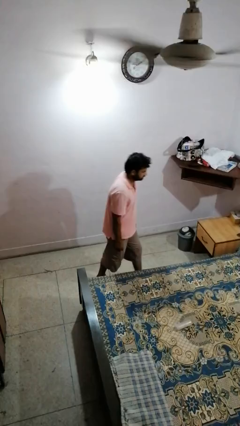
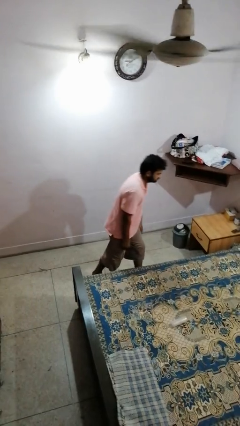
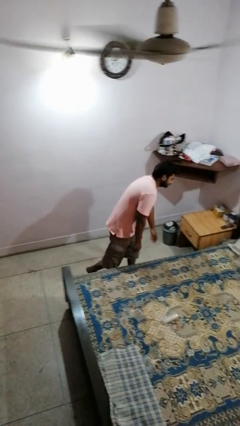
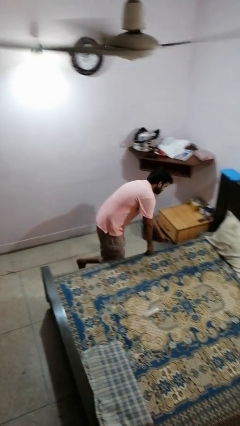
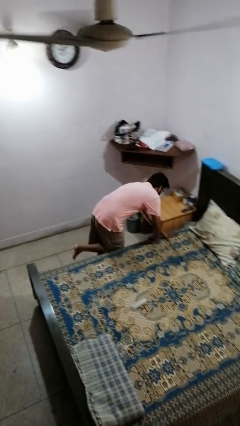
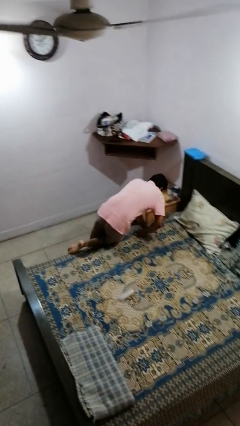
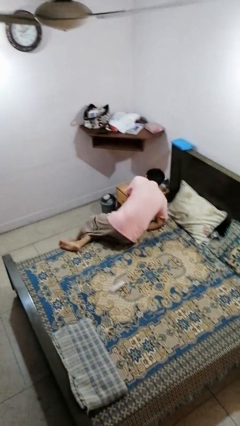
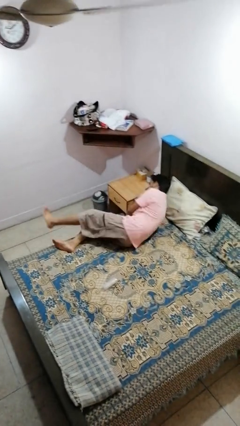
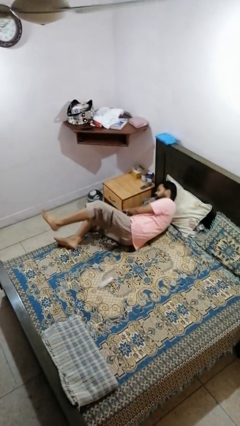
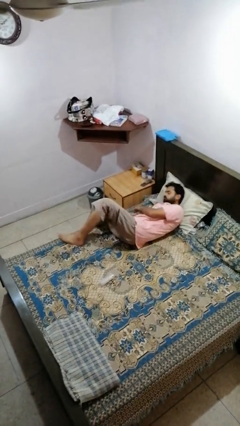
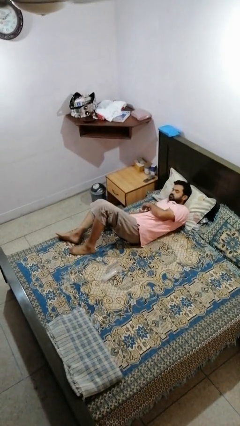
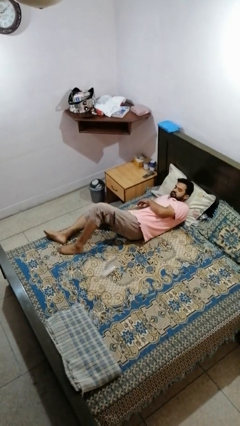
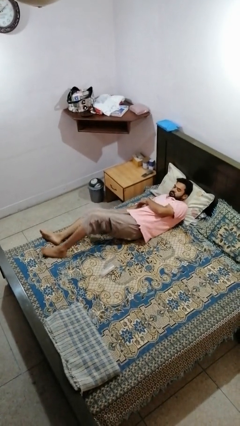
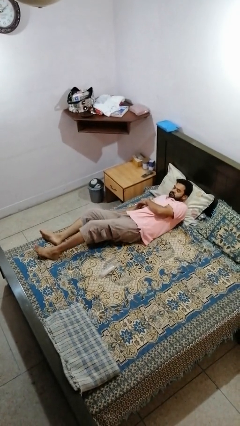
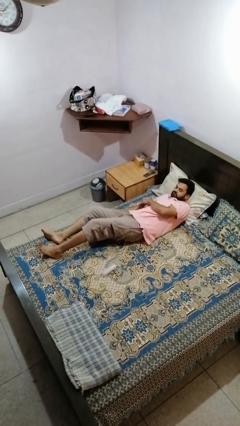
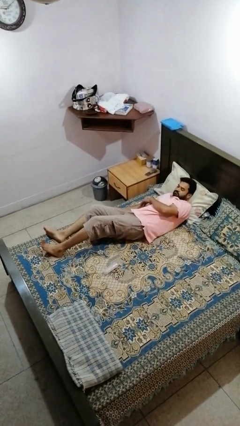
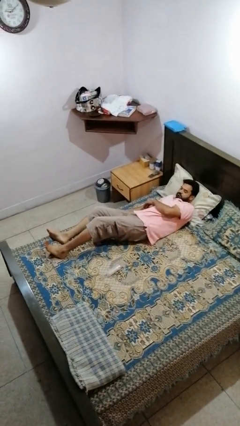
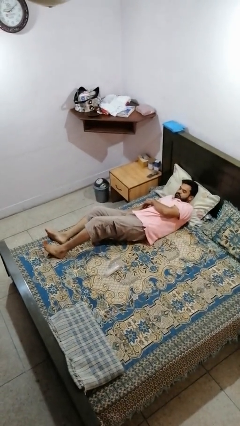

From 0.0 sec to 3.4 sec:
person lies down on bed

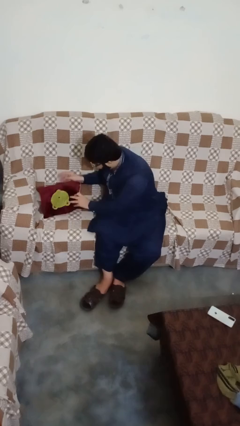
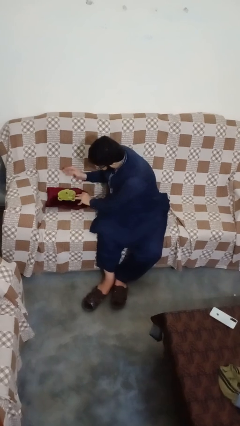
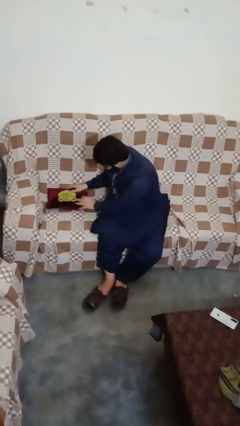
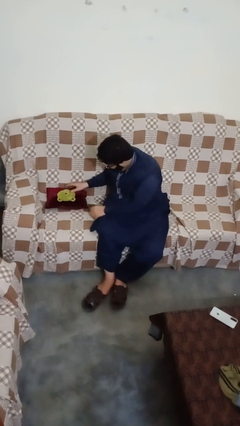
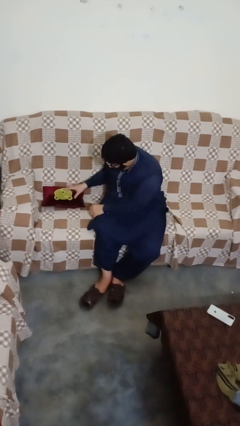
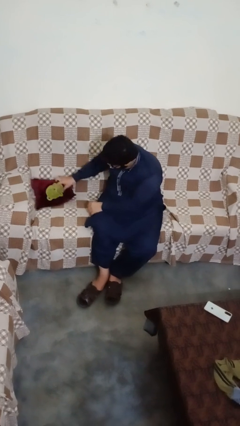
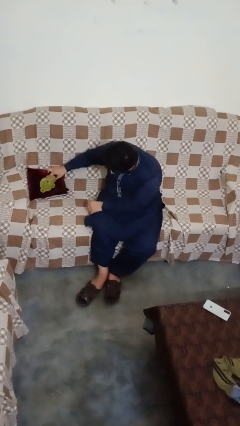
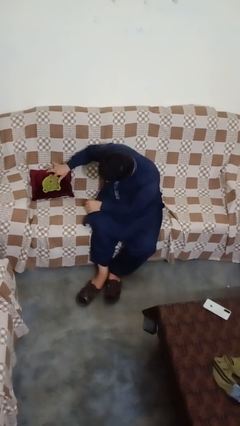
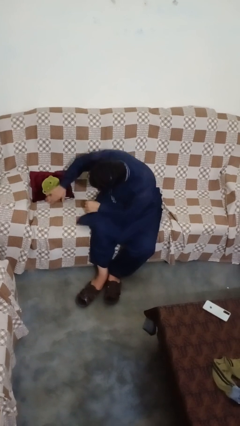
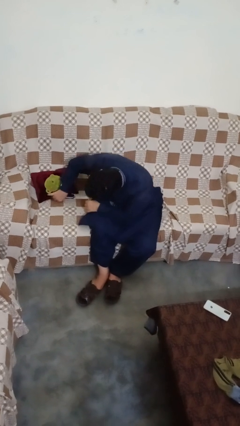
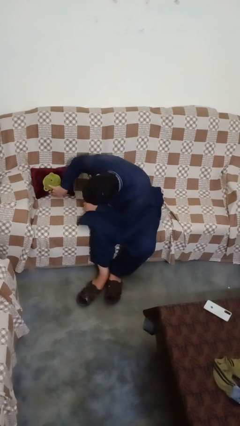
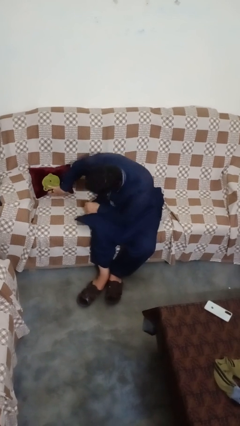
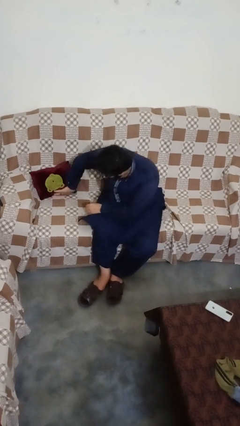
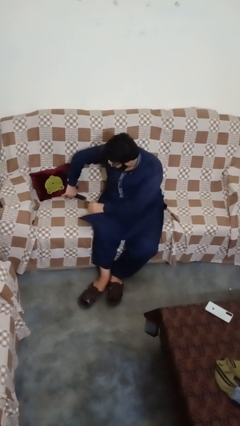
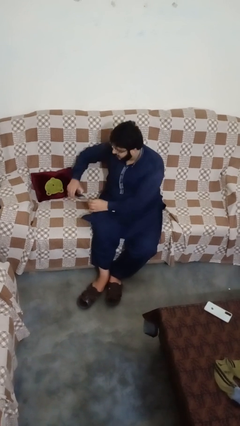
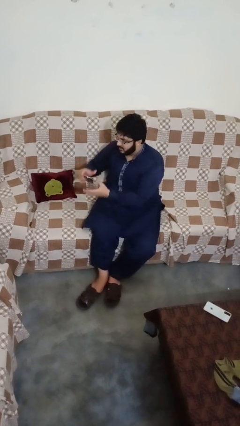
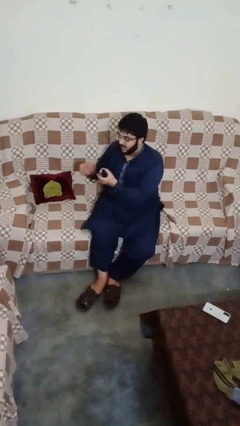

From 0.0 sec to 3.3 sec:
person searches in couch

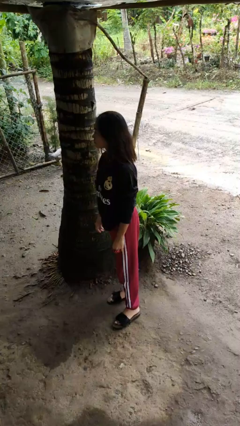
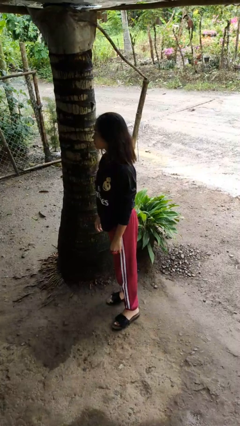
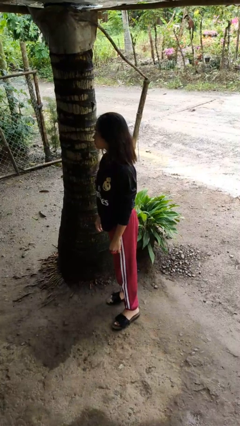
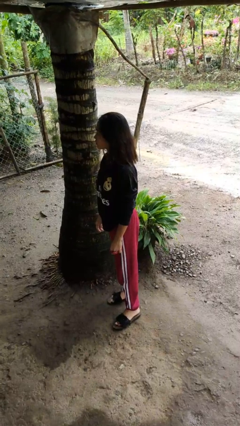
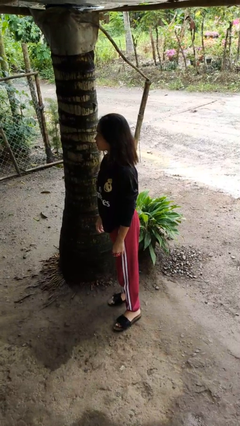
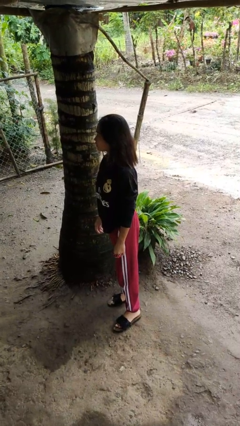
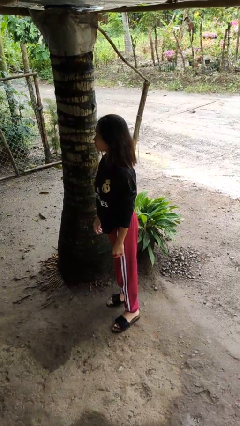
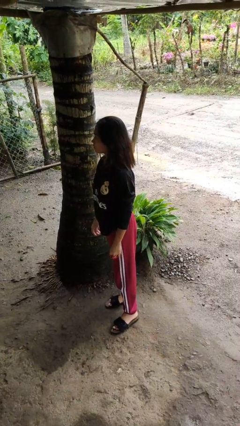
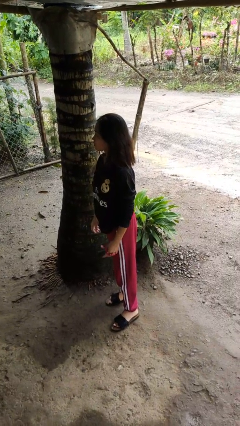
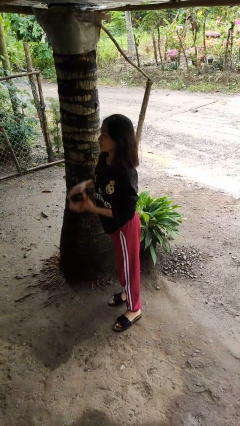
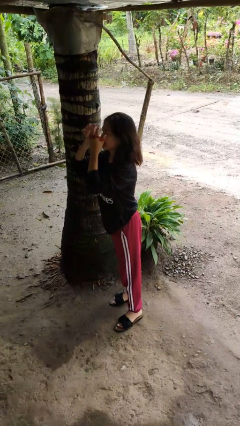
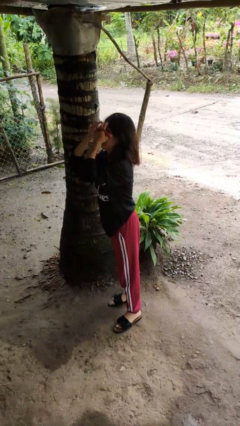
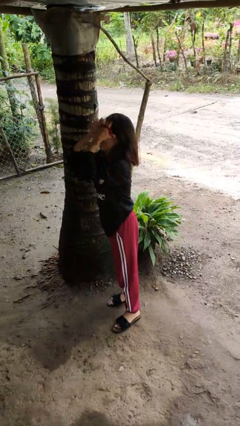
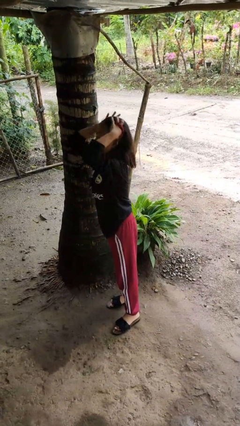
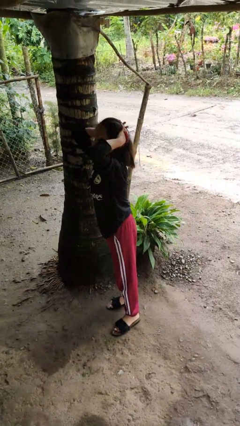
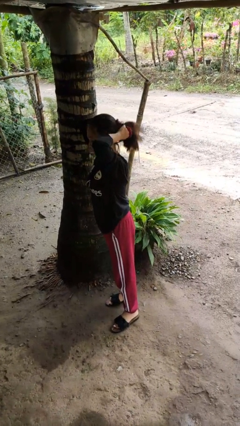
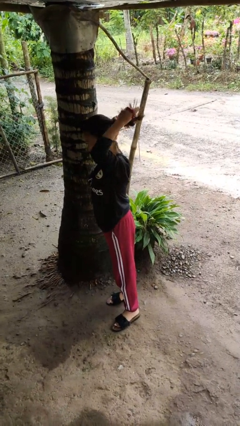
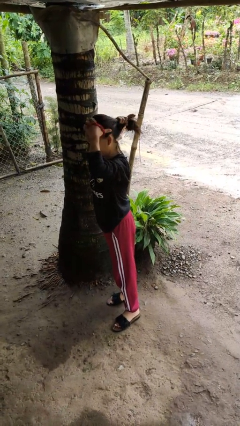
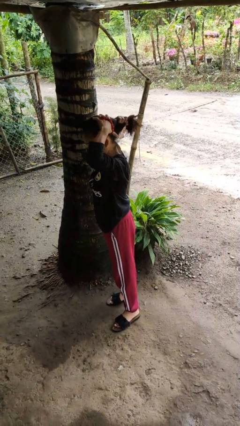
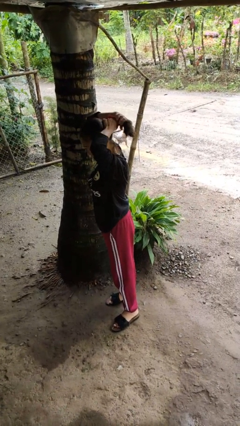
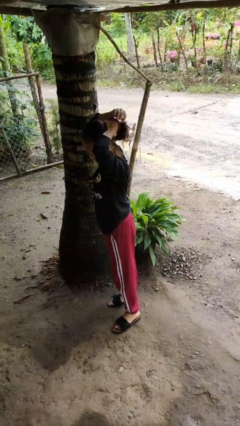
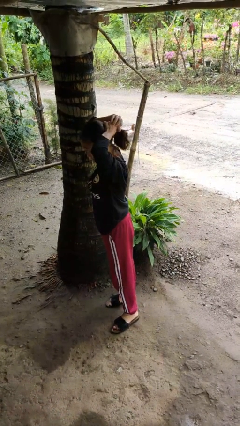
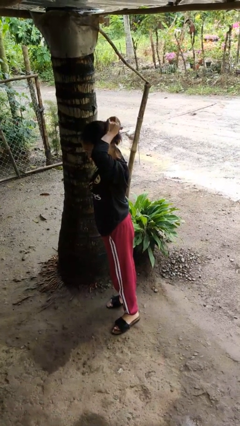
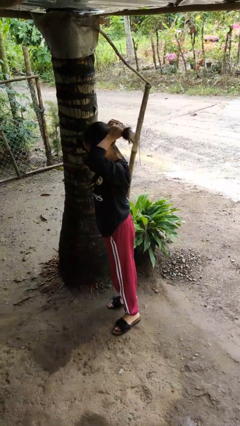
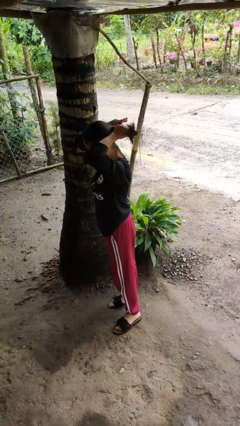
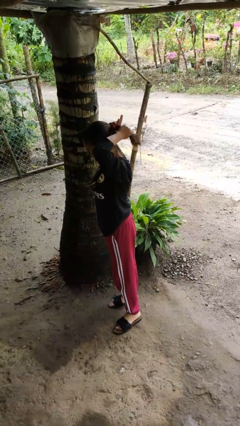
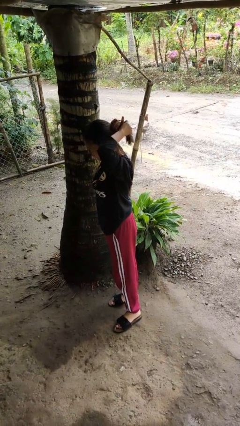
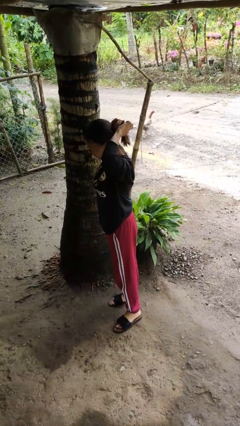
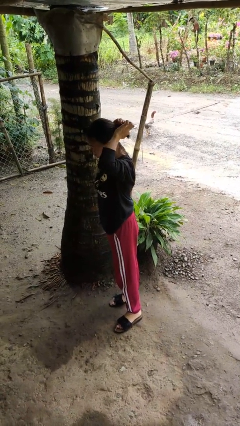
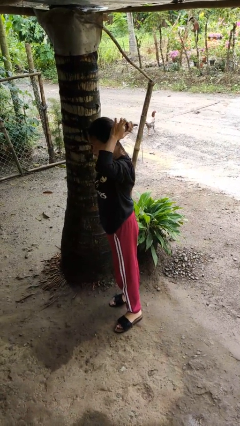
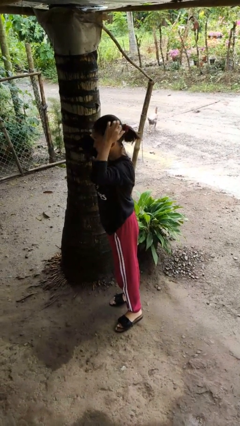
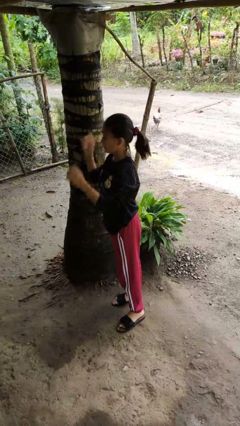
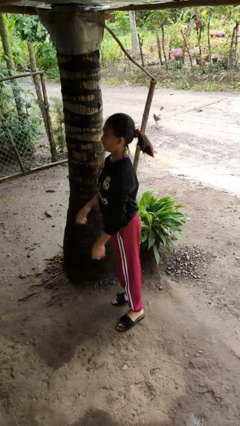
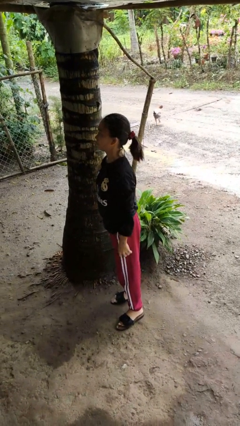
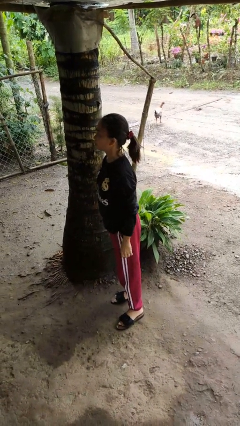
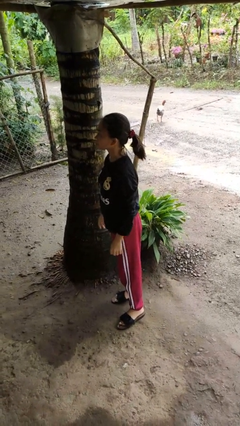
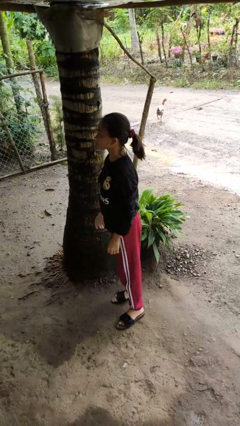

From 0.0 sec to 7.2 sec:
person puts hair in ponytail

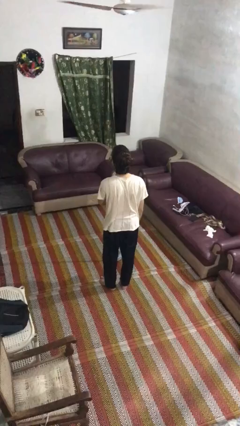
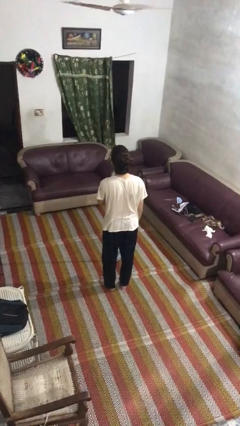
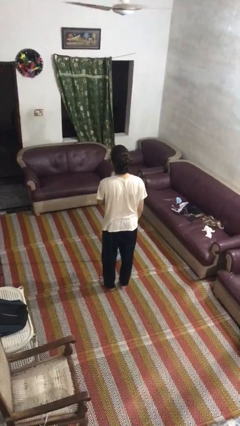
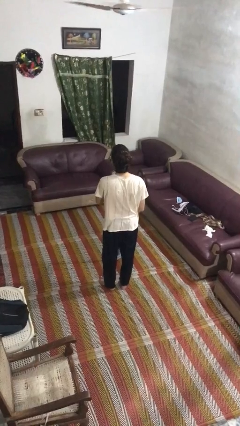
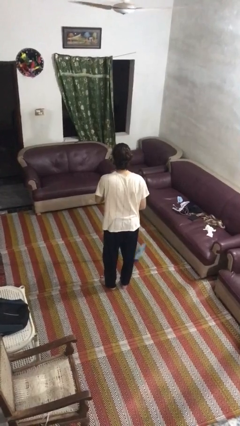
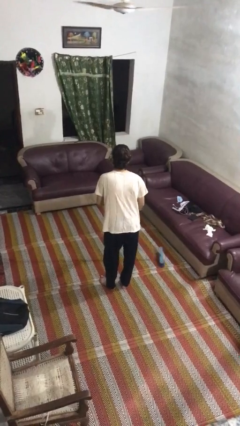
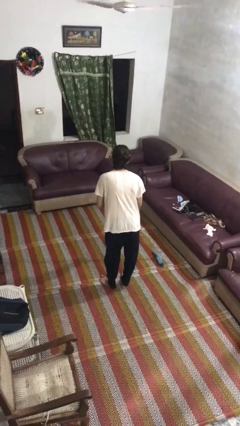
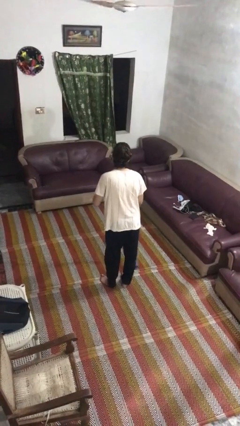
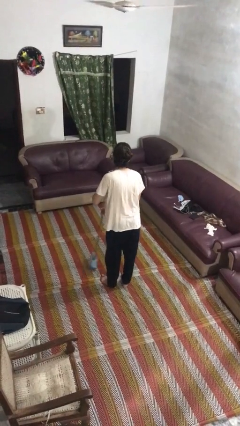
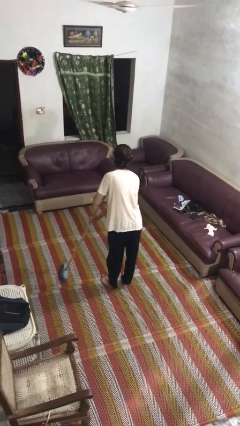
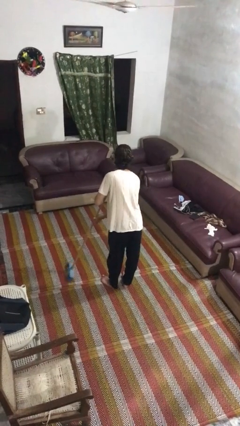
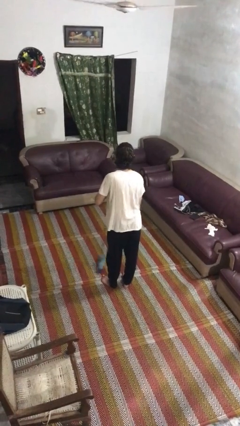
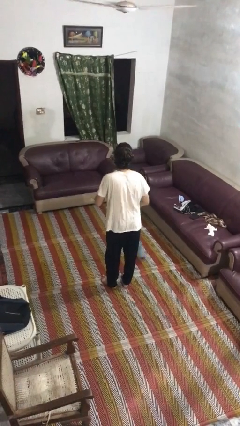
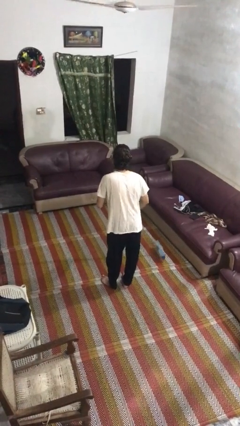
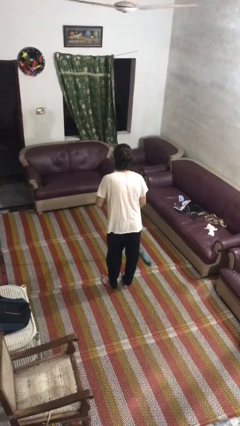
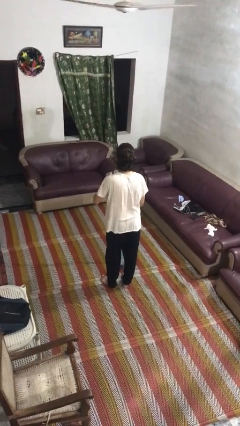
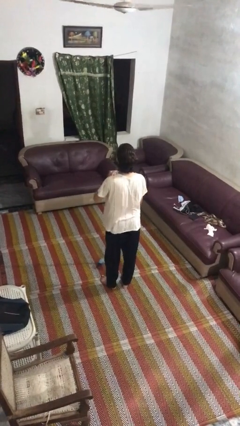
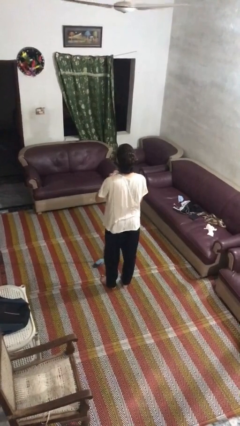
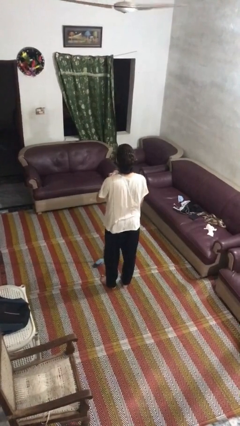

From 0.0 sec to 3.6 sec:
person sweeps floor
